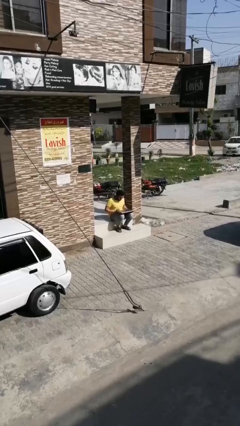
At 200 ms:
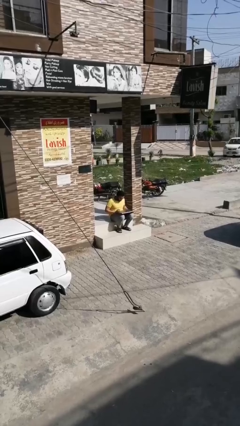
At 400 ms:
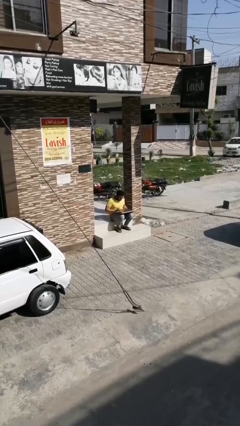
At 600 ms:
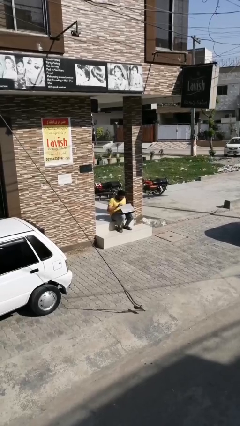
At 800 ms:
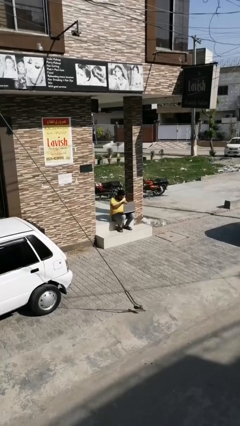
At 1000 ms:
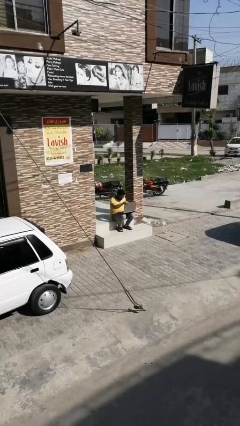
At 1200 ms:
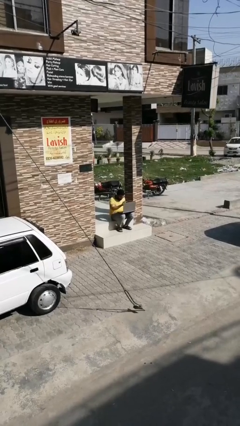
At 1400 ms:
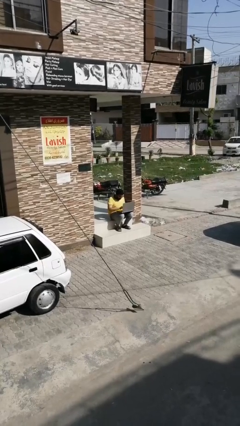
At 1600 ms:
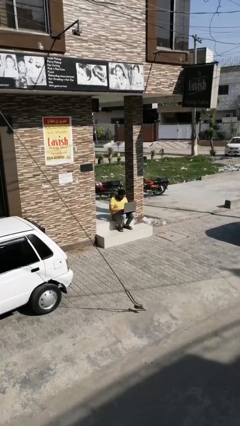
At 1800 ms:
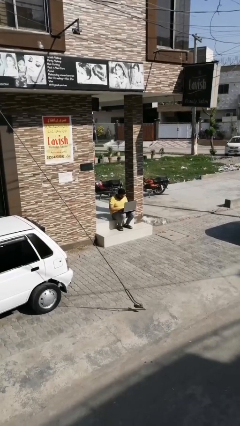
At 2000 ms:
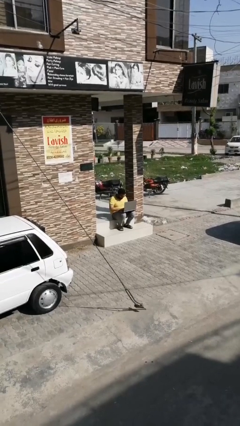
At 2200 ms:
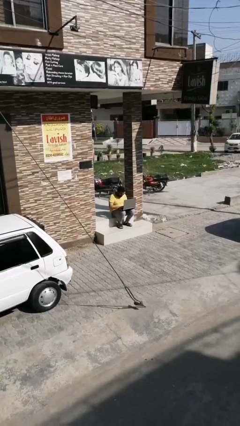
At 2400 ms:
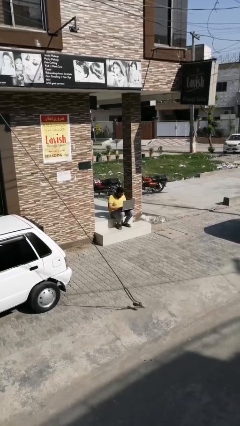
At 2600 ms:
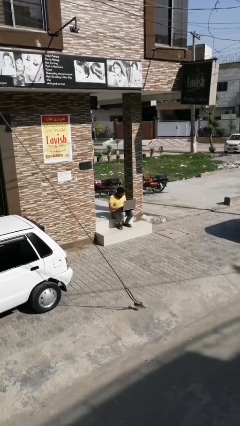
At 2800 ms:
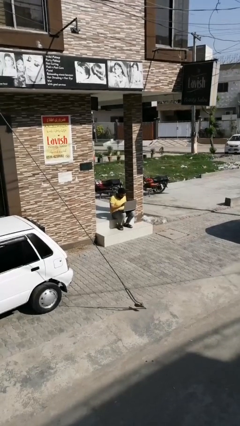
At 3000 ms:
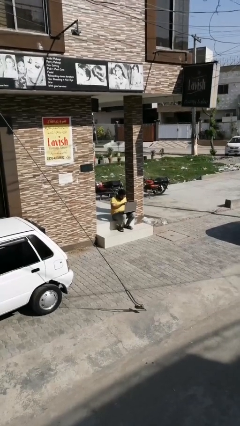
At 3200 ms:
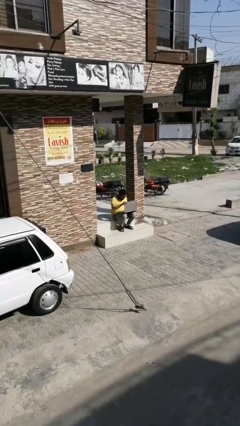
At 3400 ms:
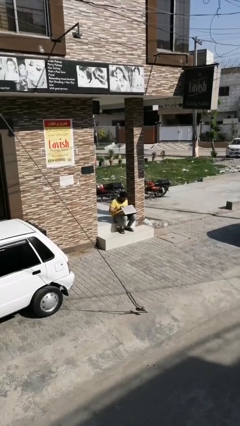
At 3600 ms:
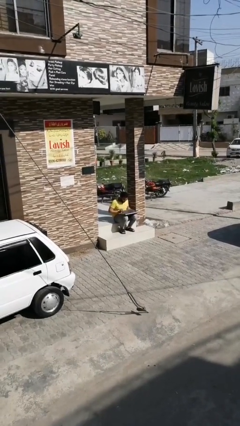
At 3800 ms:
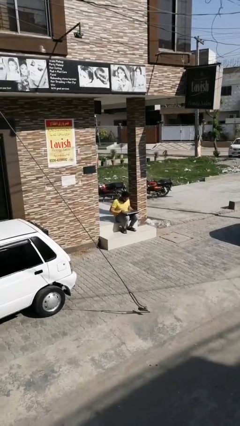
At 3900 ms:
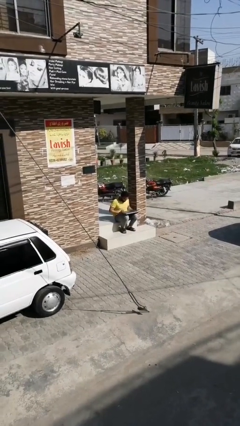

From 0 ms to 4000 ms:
person interacts with laptop

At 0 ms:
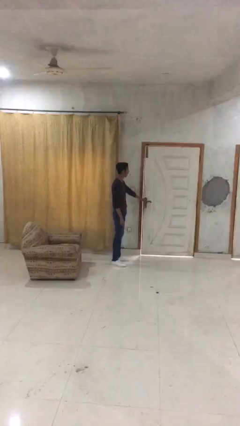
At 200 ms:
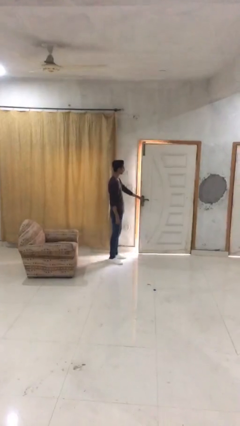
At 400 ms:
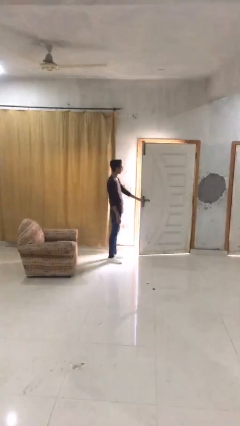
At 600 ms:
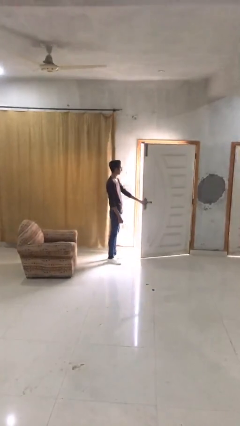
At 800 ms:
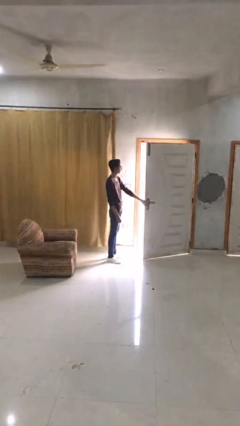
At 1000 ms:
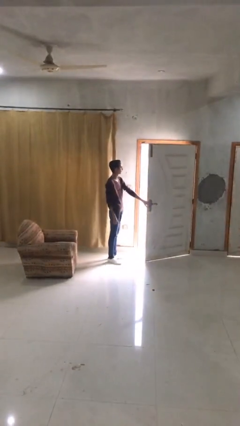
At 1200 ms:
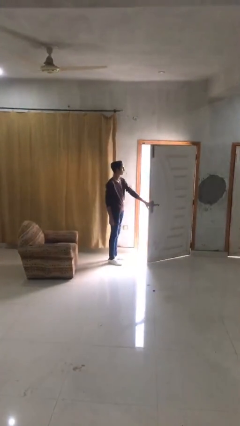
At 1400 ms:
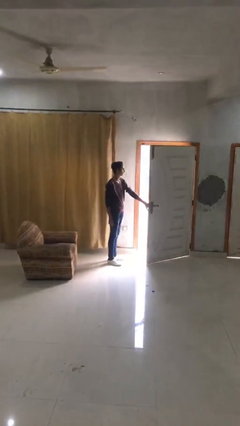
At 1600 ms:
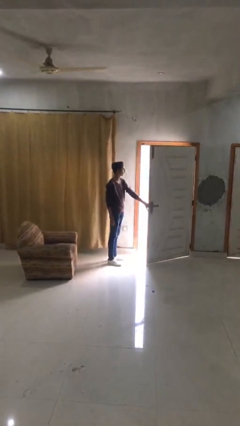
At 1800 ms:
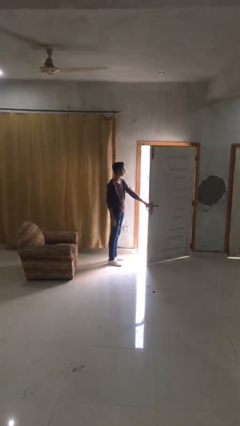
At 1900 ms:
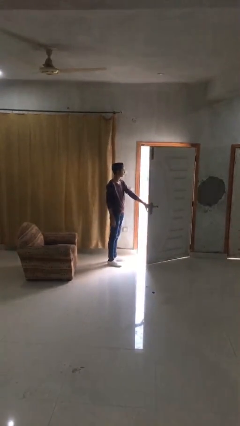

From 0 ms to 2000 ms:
person opens facility door

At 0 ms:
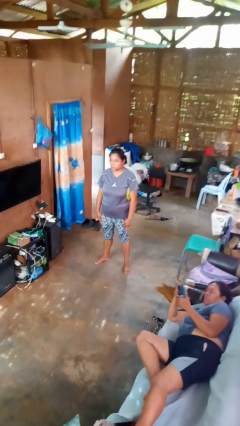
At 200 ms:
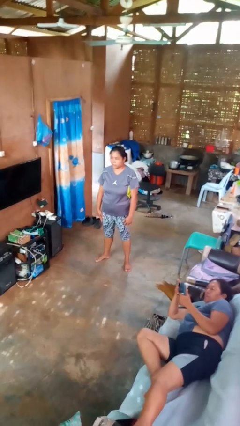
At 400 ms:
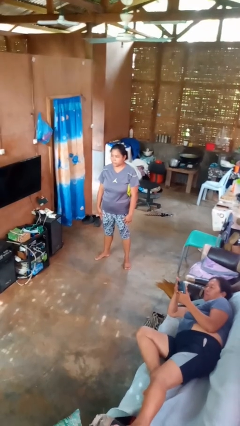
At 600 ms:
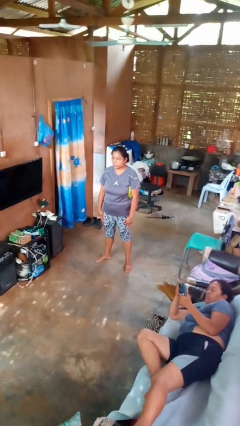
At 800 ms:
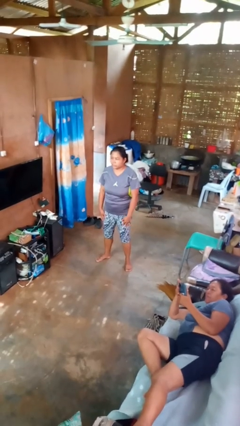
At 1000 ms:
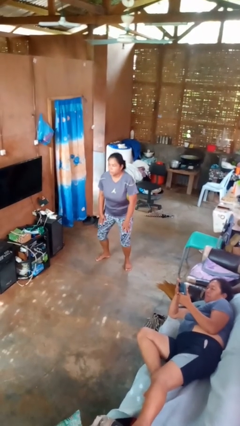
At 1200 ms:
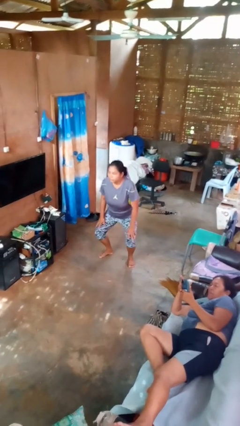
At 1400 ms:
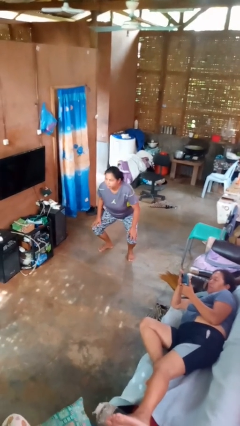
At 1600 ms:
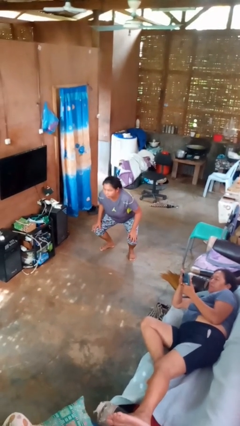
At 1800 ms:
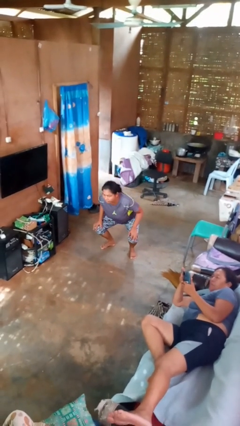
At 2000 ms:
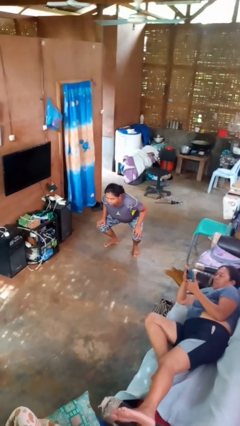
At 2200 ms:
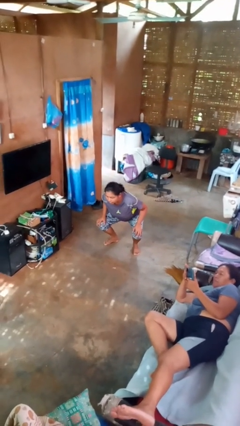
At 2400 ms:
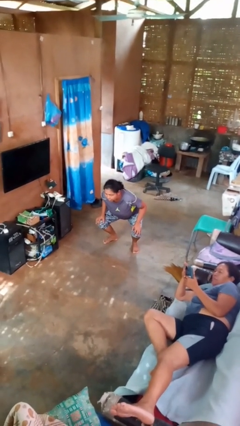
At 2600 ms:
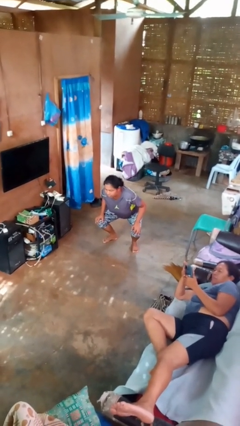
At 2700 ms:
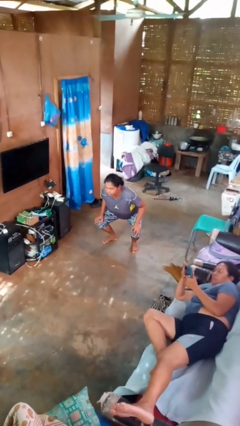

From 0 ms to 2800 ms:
person squats

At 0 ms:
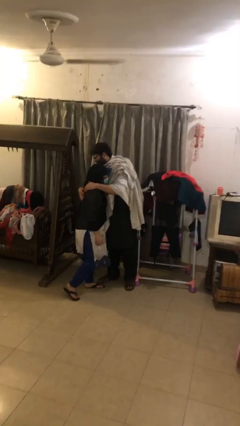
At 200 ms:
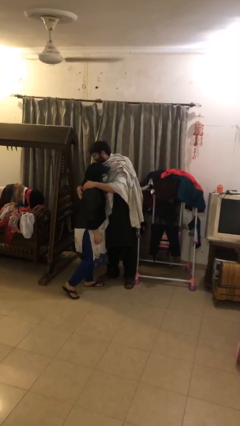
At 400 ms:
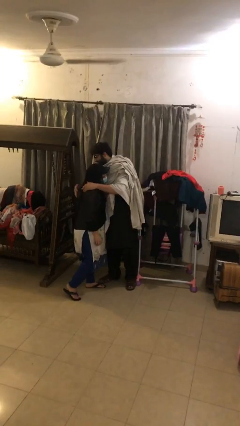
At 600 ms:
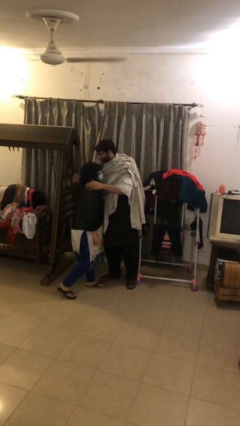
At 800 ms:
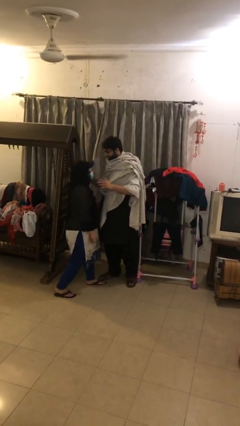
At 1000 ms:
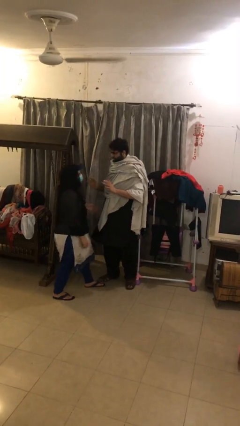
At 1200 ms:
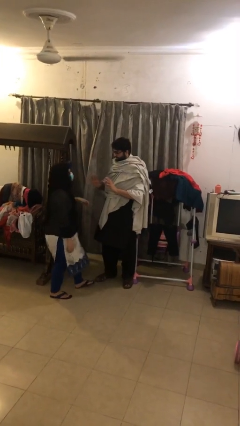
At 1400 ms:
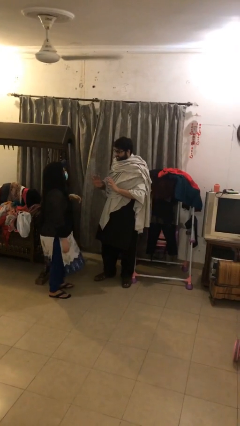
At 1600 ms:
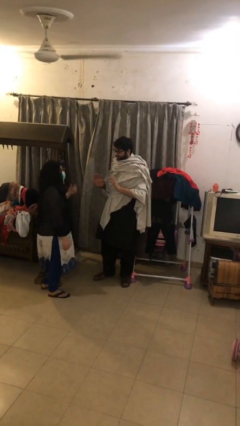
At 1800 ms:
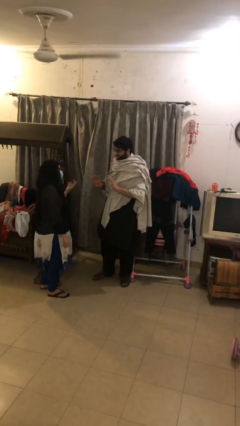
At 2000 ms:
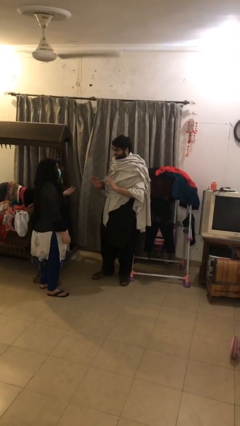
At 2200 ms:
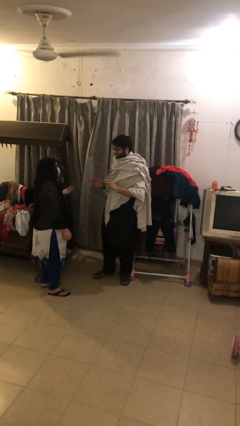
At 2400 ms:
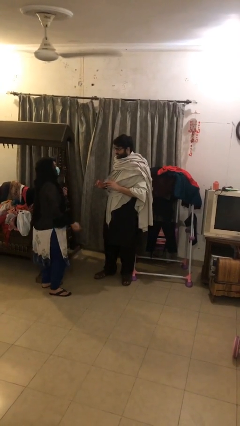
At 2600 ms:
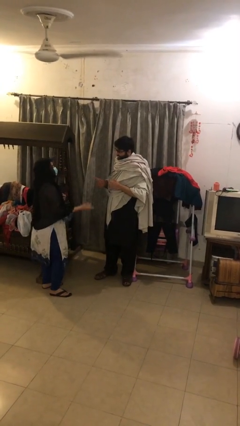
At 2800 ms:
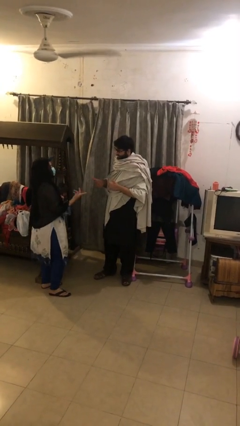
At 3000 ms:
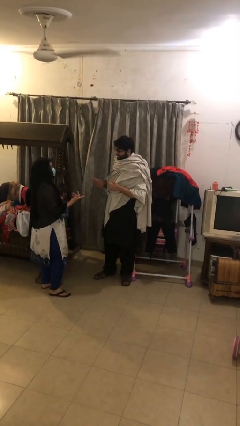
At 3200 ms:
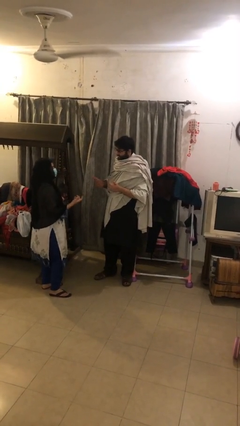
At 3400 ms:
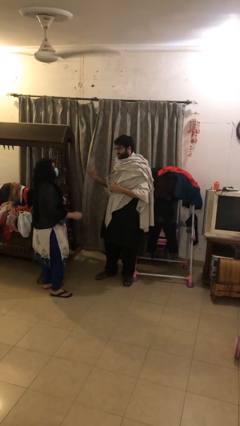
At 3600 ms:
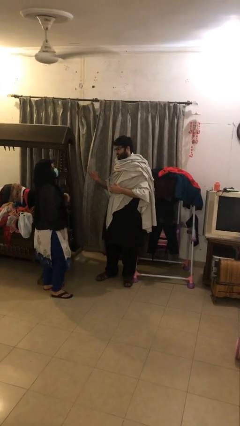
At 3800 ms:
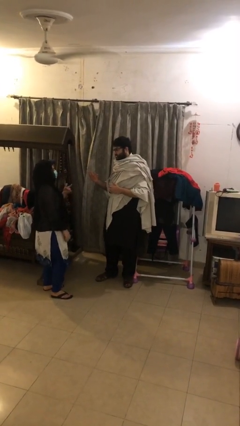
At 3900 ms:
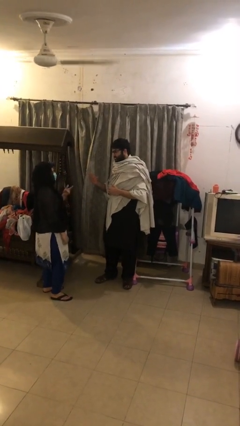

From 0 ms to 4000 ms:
person talks to person

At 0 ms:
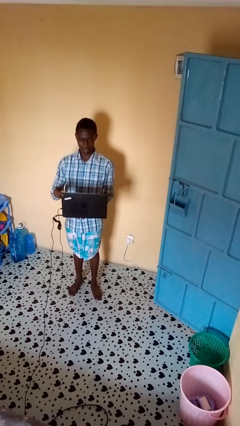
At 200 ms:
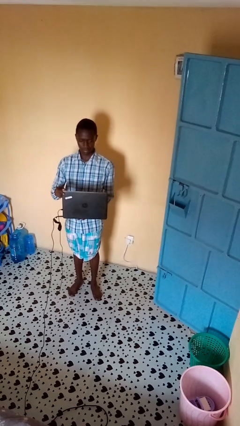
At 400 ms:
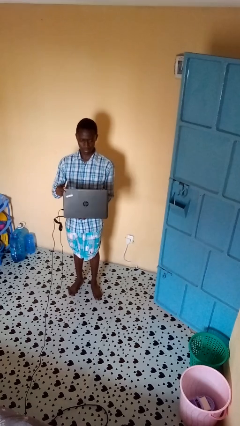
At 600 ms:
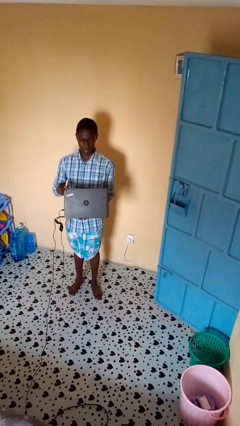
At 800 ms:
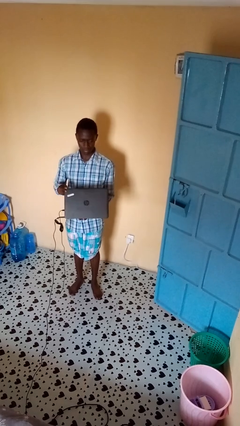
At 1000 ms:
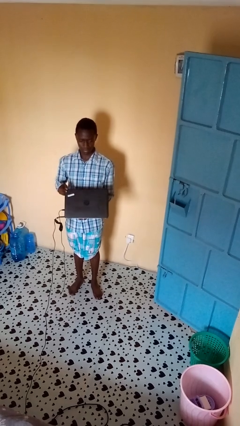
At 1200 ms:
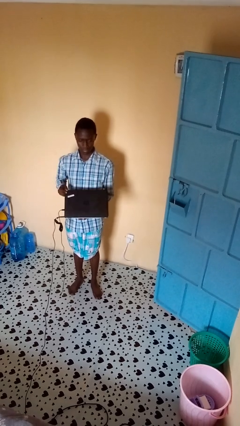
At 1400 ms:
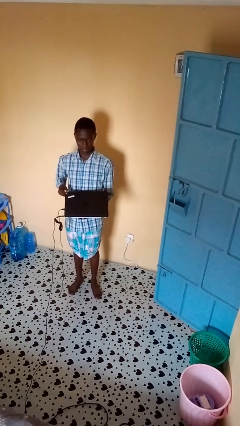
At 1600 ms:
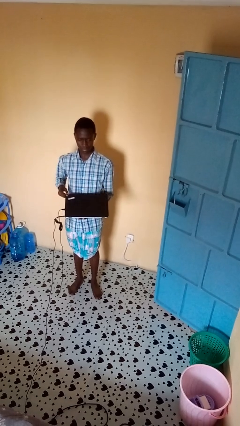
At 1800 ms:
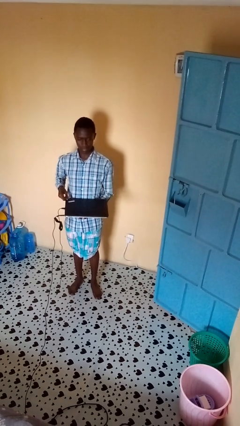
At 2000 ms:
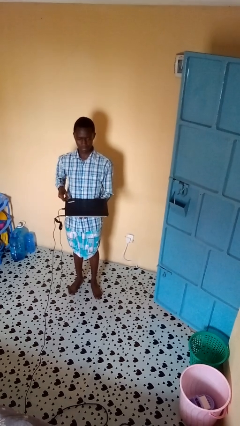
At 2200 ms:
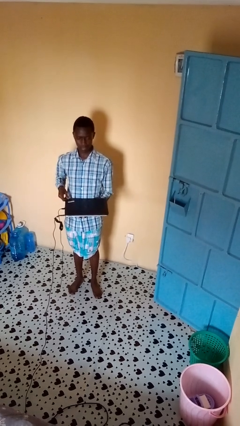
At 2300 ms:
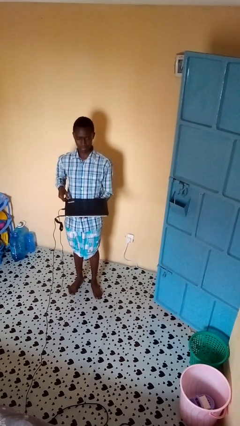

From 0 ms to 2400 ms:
person closes laptop

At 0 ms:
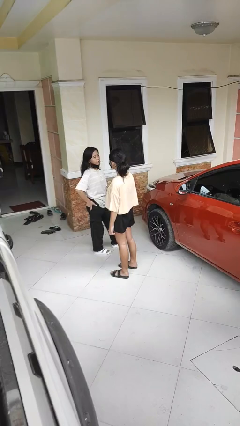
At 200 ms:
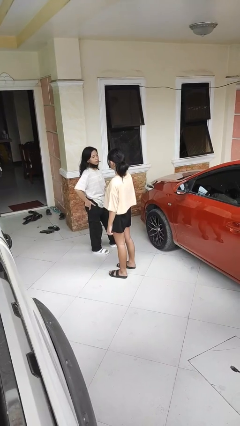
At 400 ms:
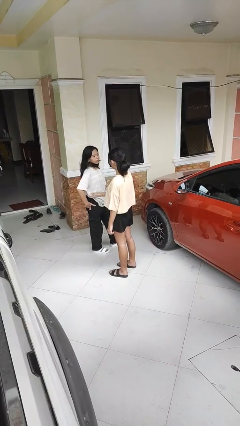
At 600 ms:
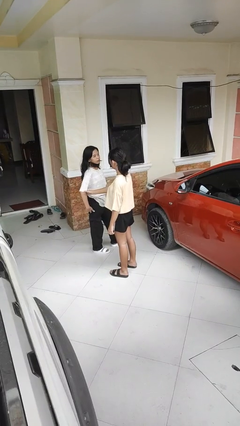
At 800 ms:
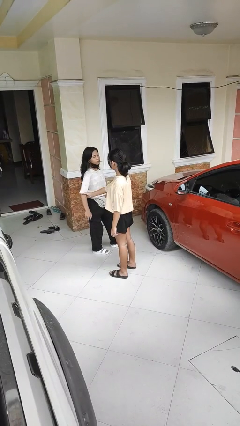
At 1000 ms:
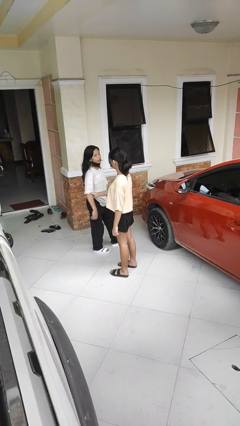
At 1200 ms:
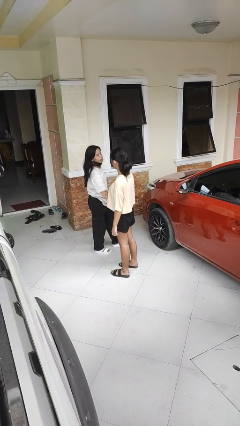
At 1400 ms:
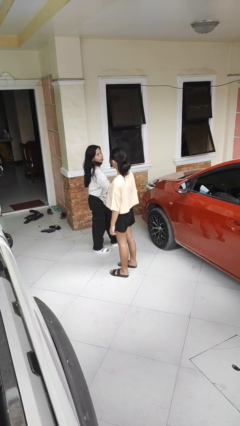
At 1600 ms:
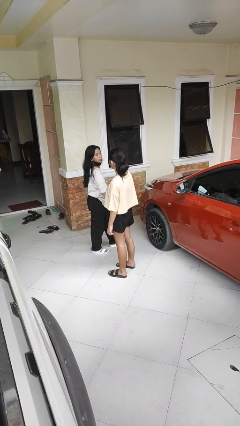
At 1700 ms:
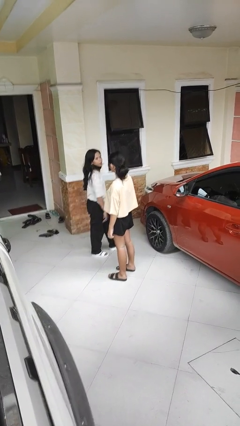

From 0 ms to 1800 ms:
person grabs person by bicep
